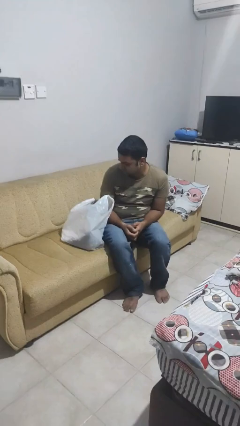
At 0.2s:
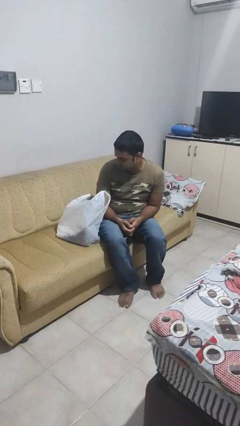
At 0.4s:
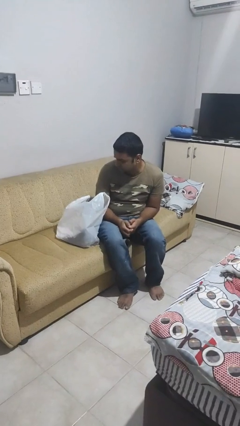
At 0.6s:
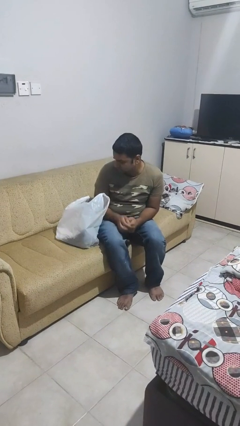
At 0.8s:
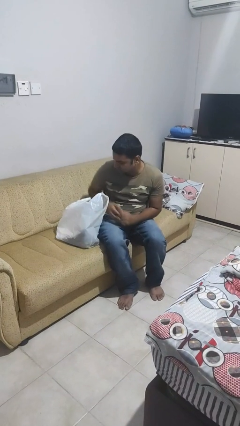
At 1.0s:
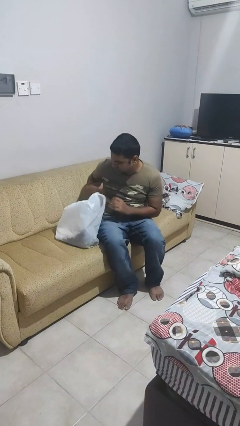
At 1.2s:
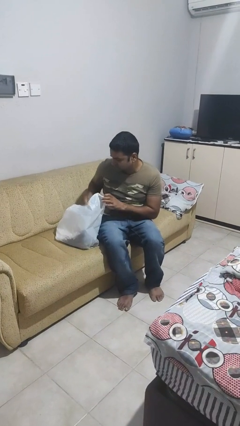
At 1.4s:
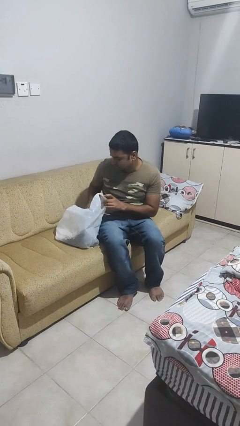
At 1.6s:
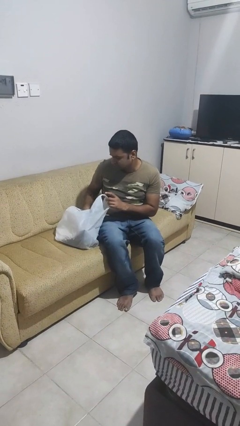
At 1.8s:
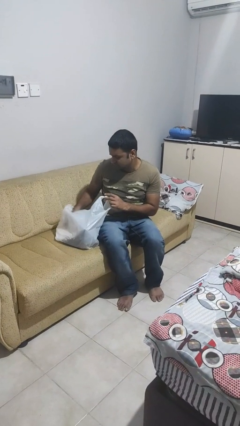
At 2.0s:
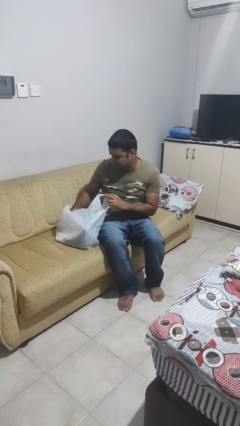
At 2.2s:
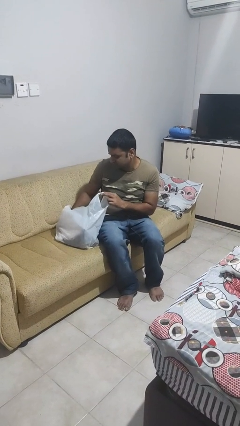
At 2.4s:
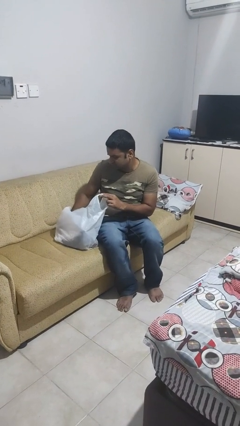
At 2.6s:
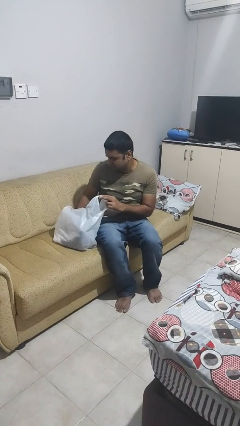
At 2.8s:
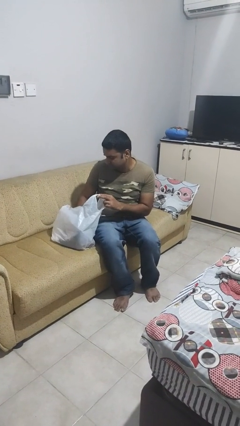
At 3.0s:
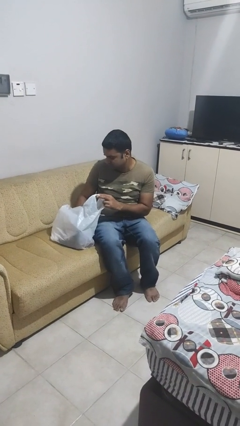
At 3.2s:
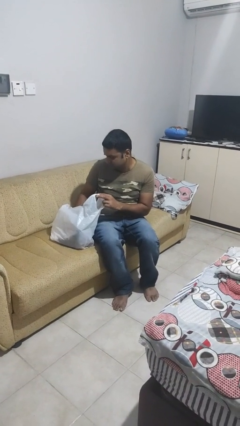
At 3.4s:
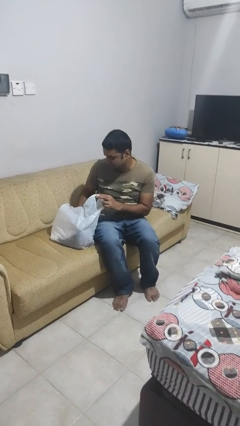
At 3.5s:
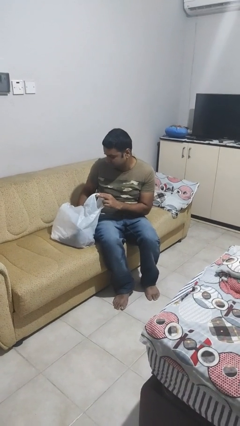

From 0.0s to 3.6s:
person searches in bag

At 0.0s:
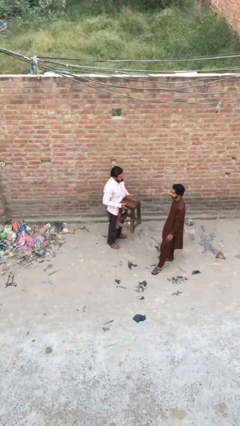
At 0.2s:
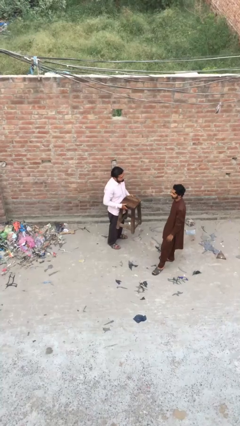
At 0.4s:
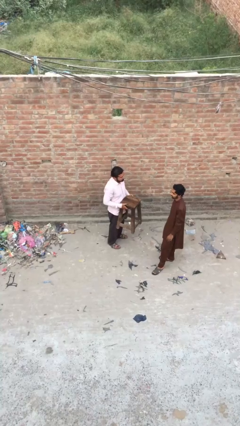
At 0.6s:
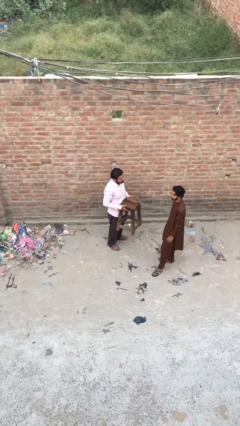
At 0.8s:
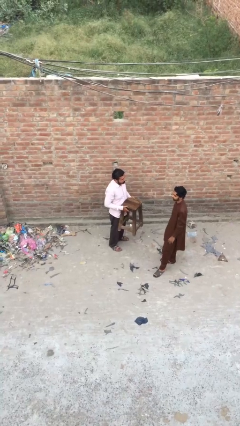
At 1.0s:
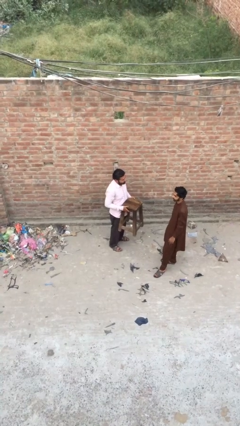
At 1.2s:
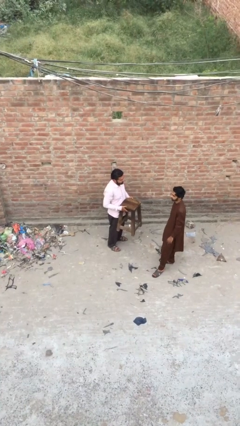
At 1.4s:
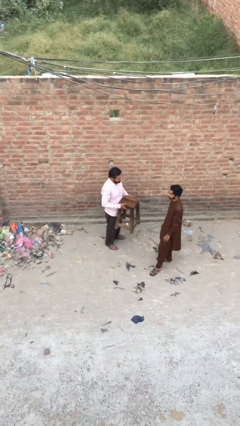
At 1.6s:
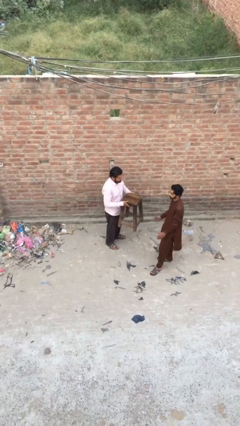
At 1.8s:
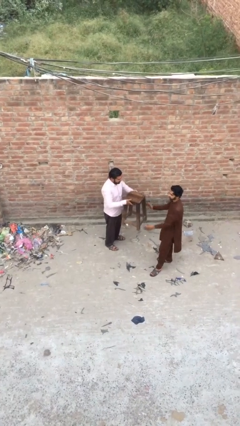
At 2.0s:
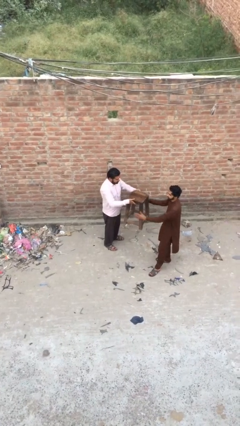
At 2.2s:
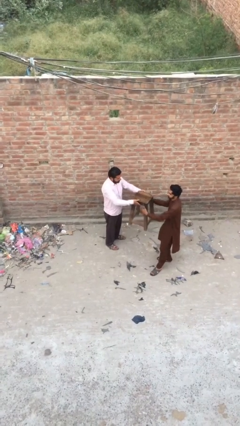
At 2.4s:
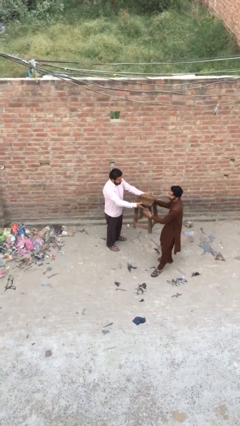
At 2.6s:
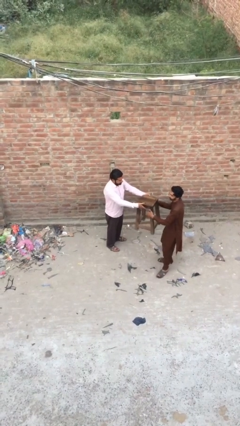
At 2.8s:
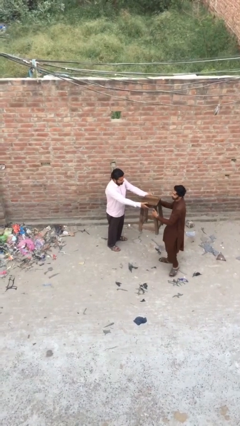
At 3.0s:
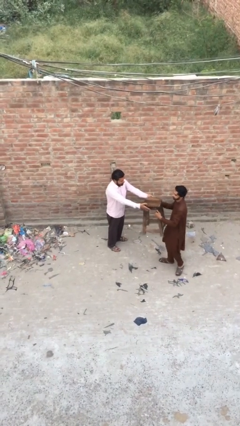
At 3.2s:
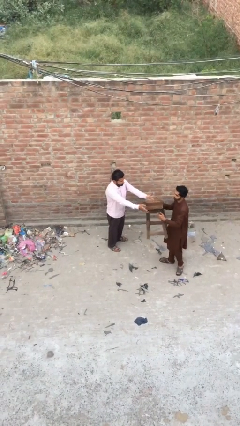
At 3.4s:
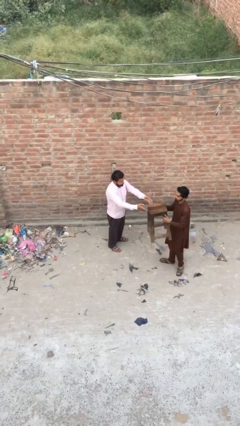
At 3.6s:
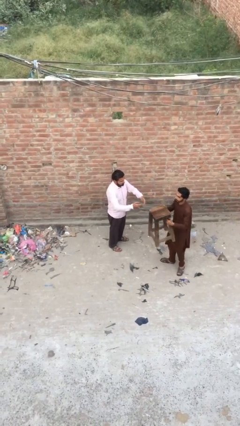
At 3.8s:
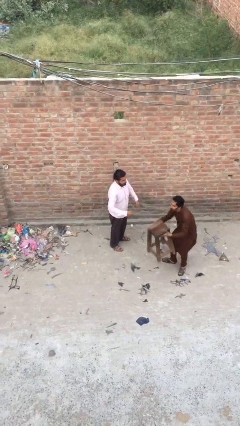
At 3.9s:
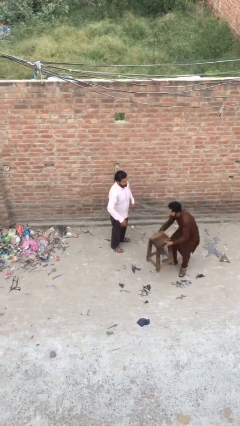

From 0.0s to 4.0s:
person transfers object to person

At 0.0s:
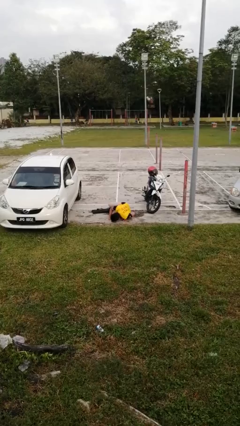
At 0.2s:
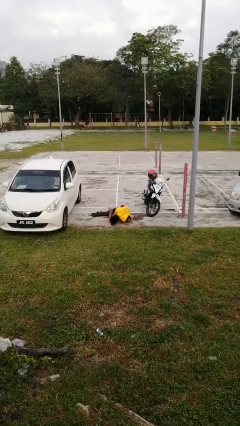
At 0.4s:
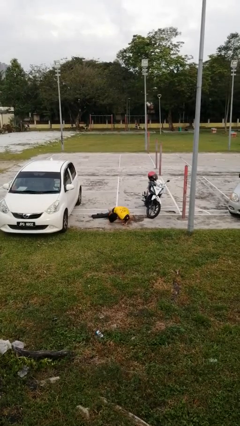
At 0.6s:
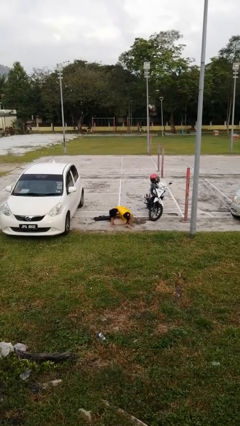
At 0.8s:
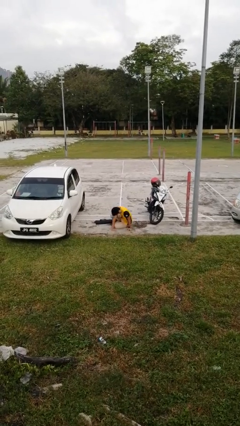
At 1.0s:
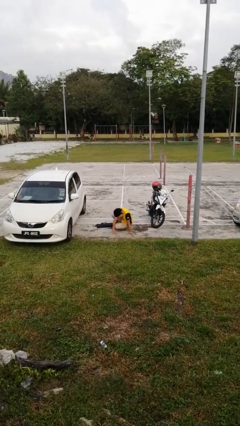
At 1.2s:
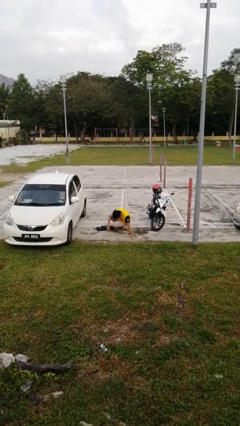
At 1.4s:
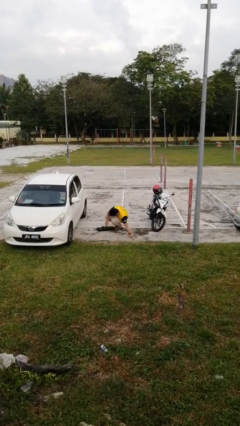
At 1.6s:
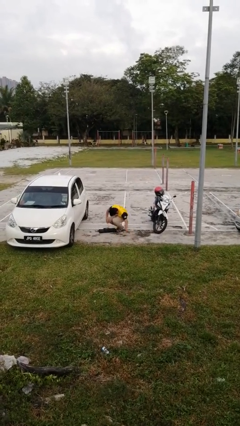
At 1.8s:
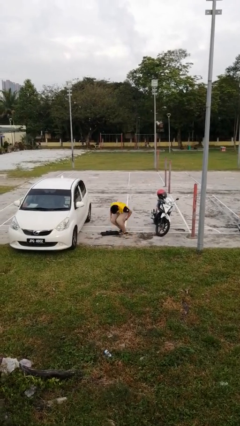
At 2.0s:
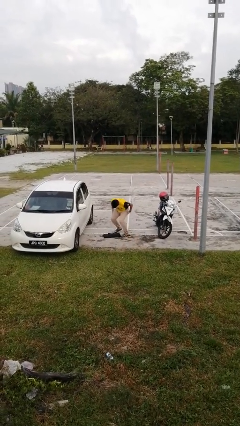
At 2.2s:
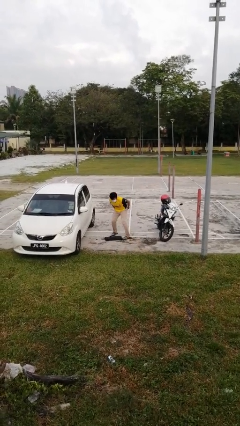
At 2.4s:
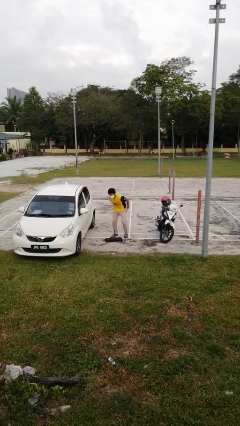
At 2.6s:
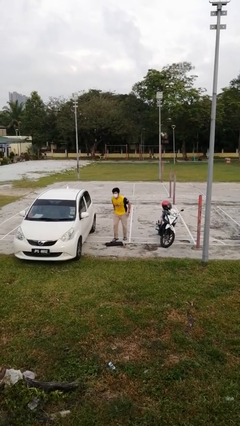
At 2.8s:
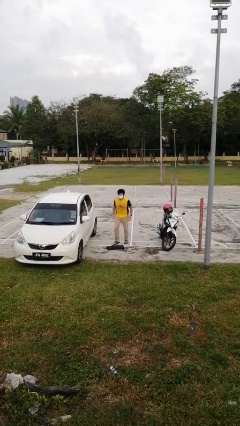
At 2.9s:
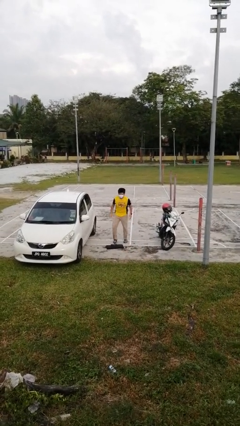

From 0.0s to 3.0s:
person stands up from floor

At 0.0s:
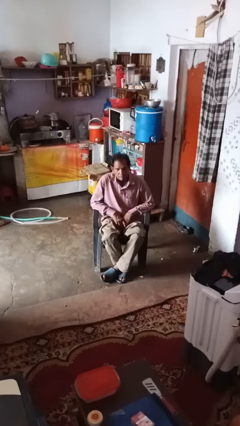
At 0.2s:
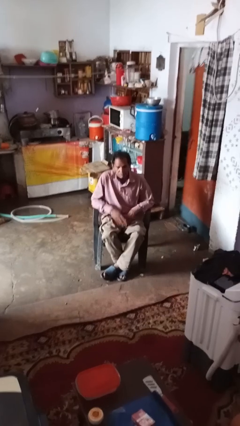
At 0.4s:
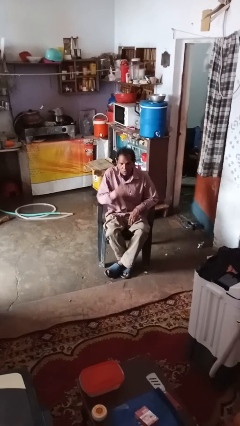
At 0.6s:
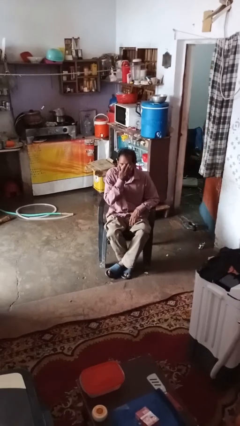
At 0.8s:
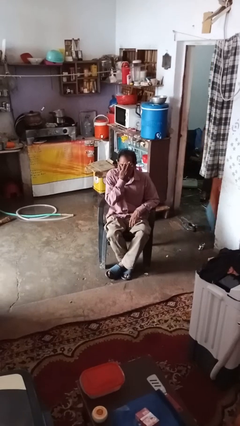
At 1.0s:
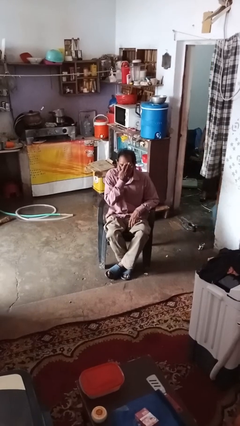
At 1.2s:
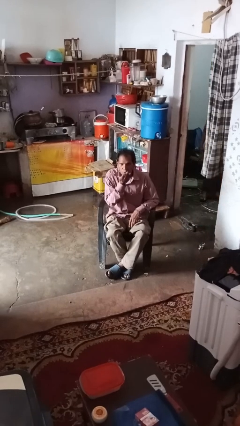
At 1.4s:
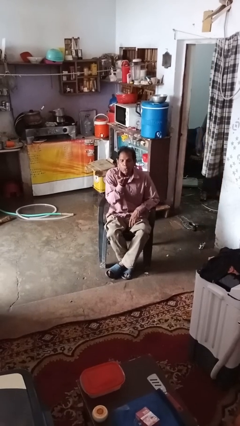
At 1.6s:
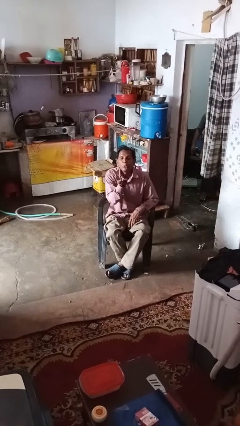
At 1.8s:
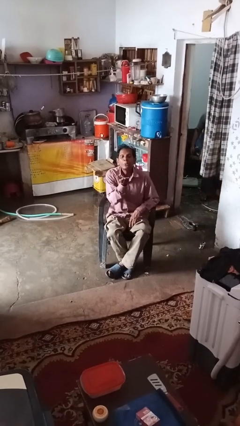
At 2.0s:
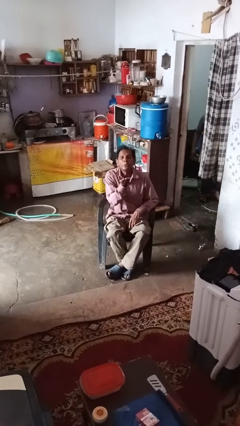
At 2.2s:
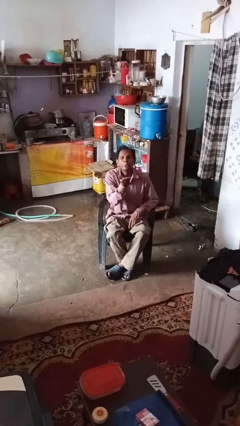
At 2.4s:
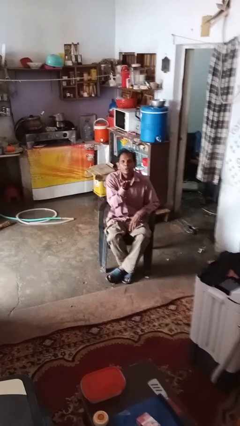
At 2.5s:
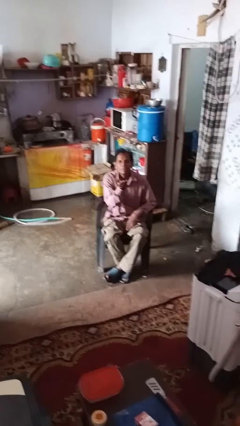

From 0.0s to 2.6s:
person gestures blow kiss

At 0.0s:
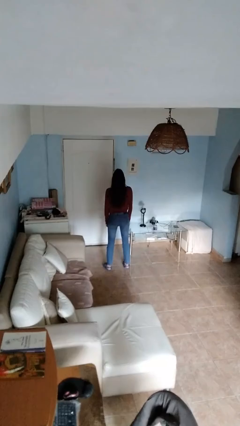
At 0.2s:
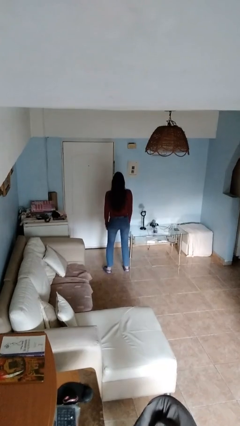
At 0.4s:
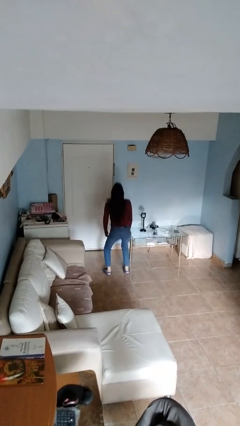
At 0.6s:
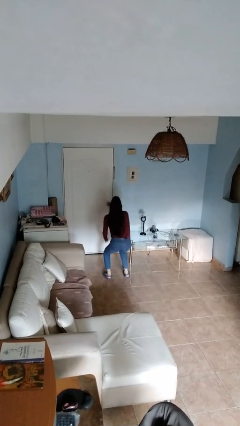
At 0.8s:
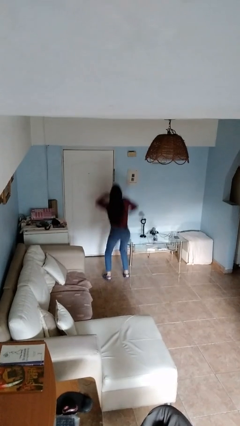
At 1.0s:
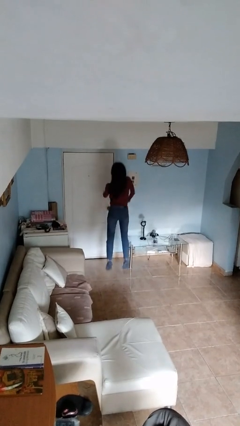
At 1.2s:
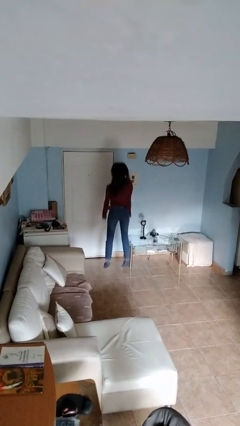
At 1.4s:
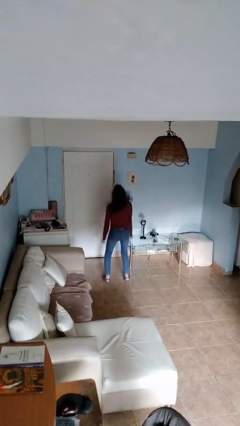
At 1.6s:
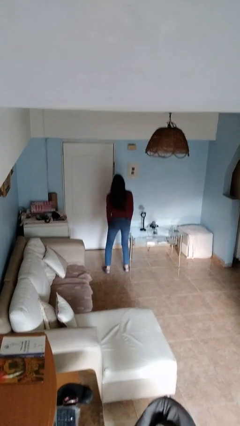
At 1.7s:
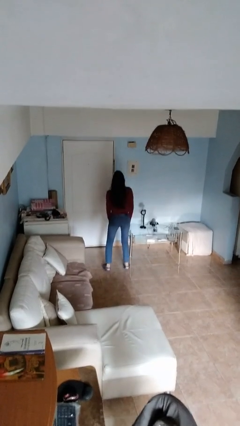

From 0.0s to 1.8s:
person jumps

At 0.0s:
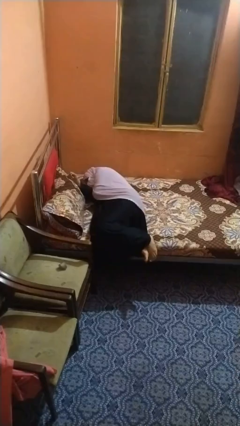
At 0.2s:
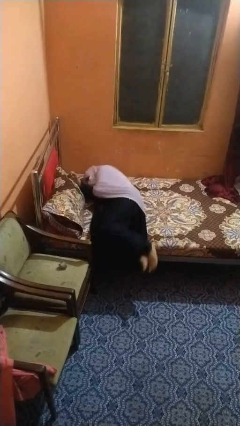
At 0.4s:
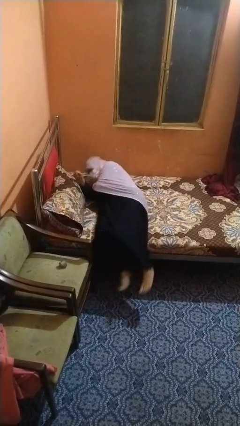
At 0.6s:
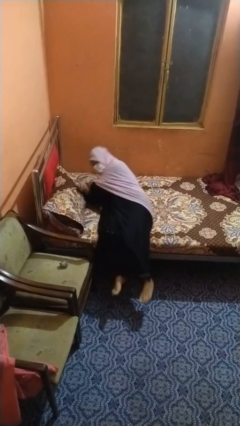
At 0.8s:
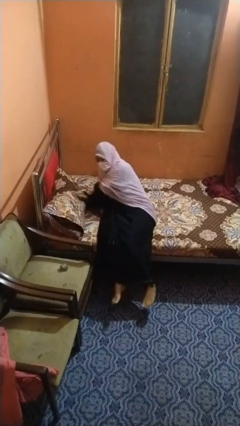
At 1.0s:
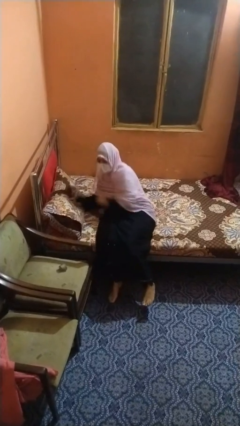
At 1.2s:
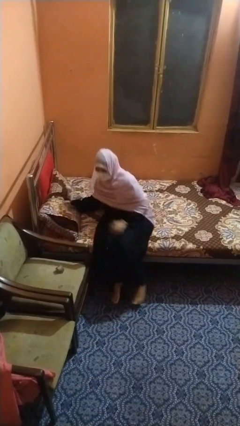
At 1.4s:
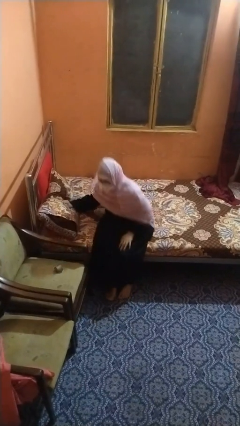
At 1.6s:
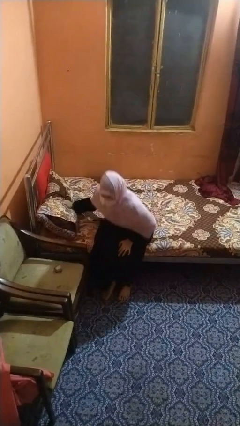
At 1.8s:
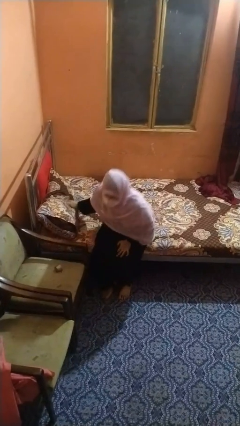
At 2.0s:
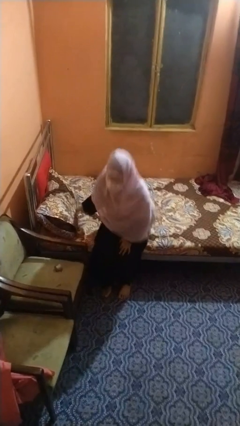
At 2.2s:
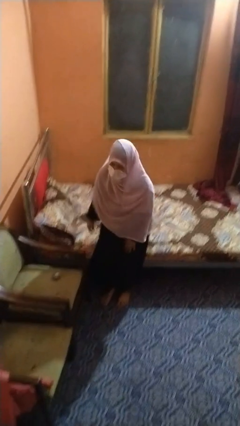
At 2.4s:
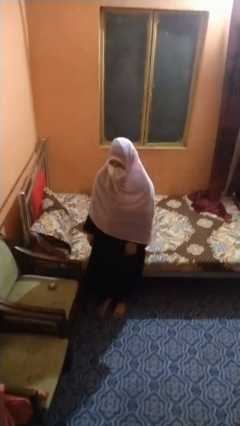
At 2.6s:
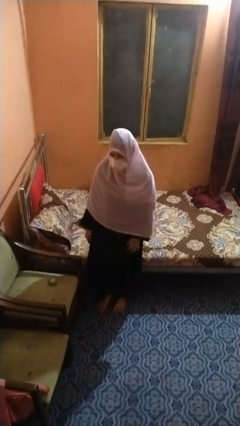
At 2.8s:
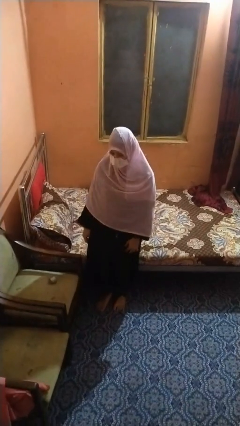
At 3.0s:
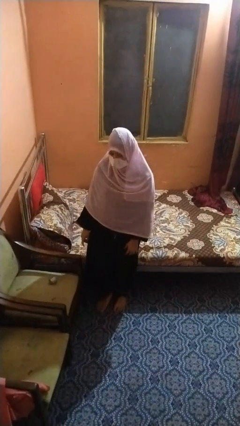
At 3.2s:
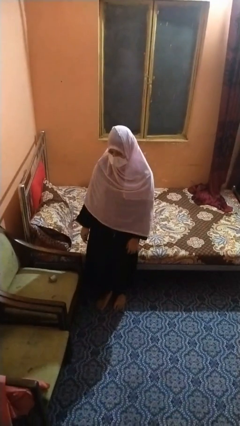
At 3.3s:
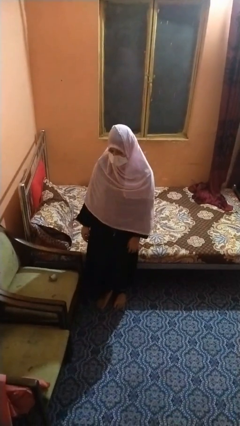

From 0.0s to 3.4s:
person stands up
